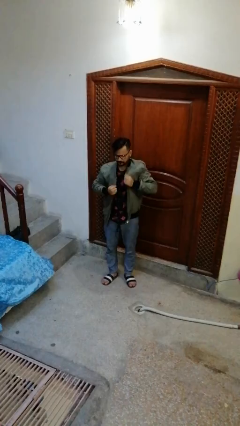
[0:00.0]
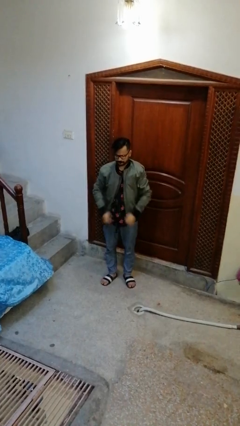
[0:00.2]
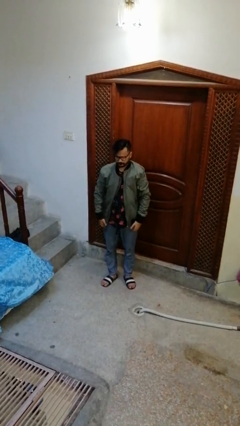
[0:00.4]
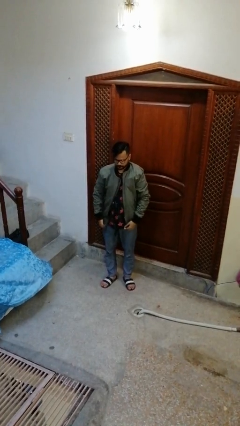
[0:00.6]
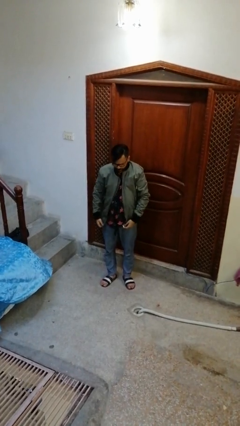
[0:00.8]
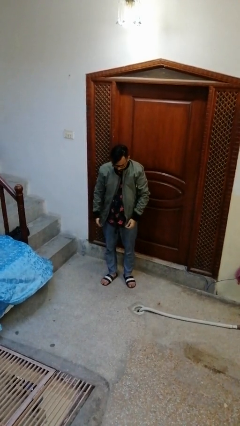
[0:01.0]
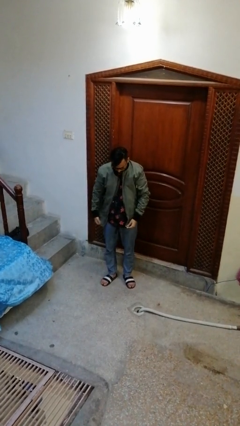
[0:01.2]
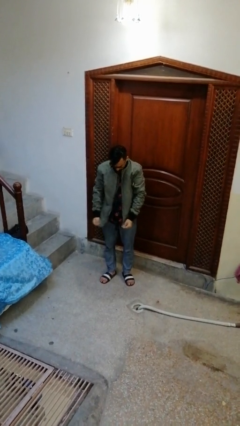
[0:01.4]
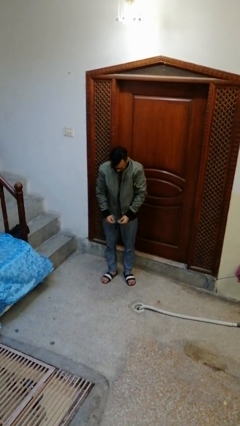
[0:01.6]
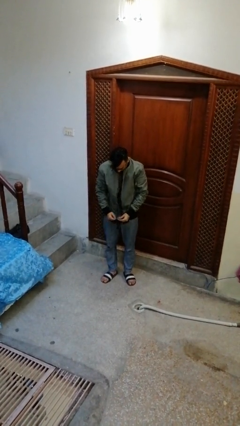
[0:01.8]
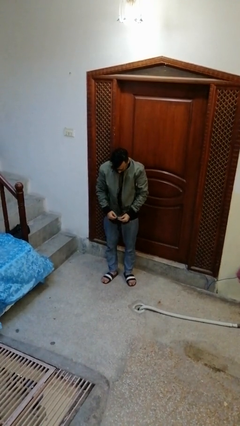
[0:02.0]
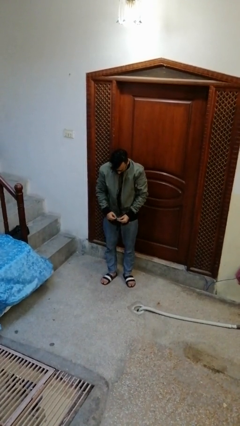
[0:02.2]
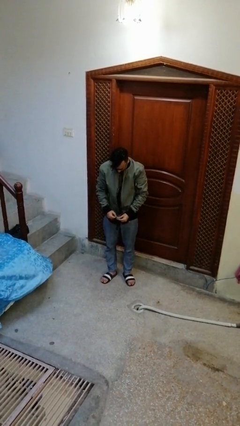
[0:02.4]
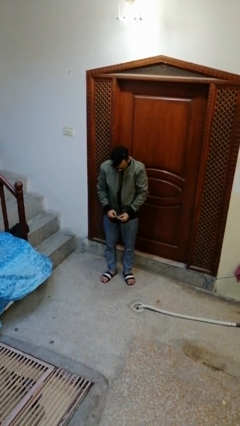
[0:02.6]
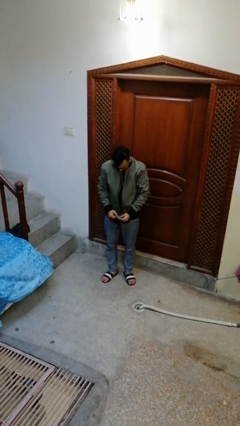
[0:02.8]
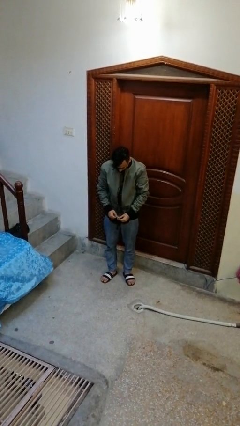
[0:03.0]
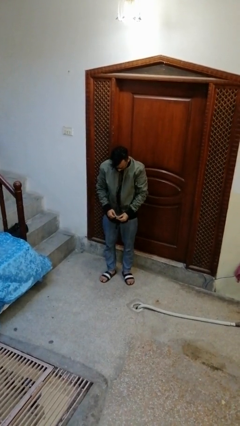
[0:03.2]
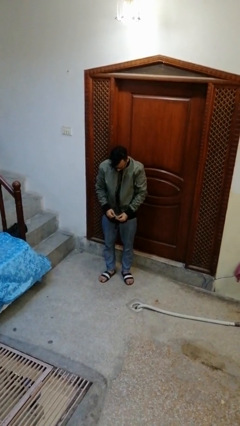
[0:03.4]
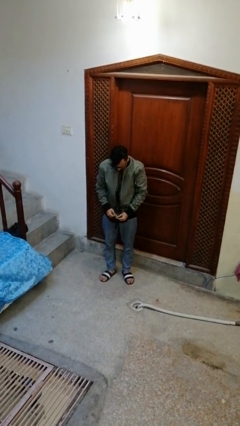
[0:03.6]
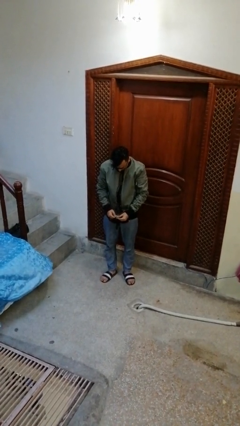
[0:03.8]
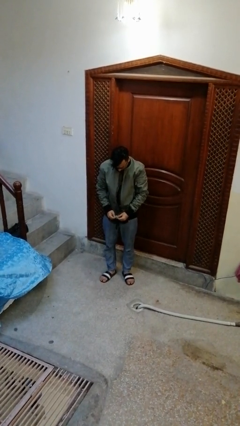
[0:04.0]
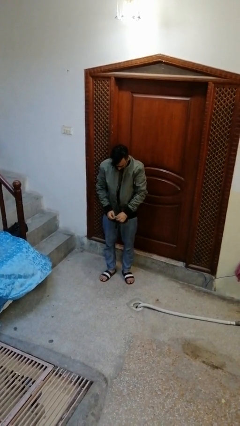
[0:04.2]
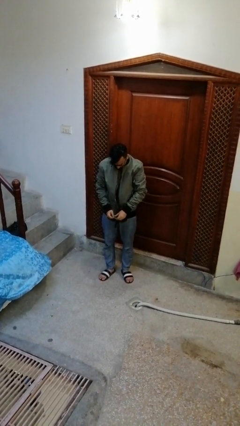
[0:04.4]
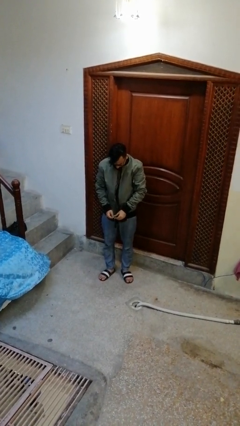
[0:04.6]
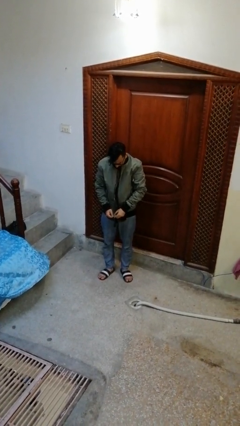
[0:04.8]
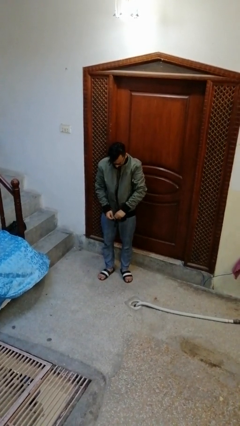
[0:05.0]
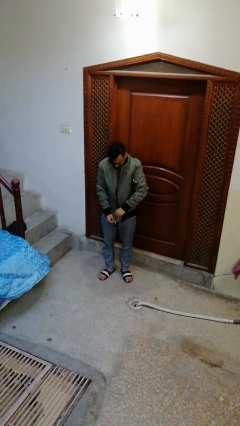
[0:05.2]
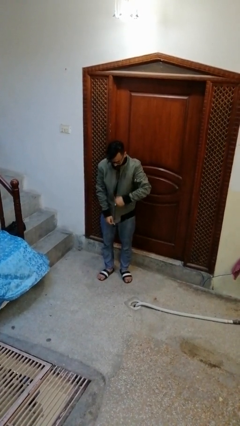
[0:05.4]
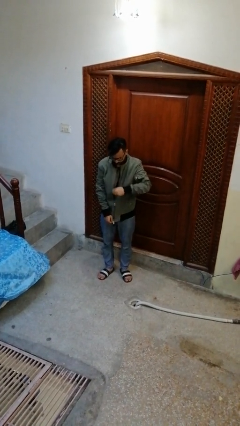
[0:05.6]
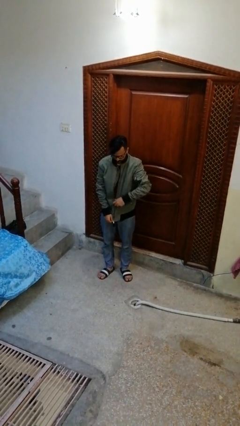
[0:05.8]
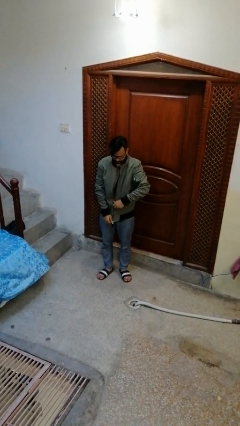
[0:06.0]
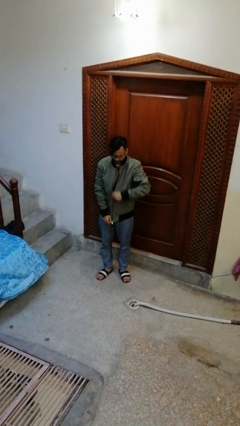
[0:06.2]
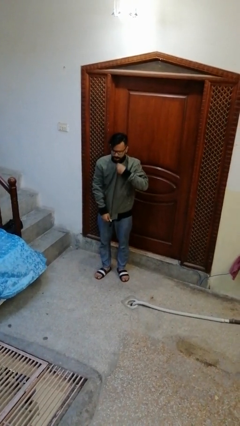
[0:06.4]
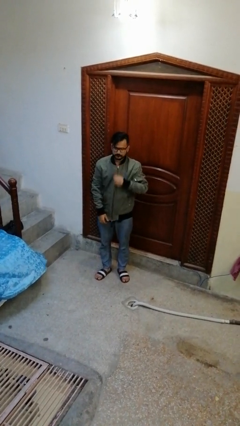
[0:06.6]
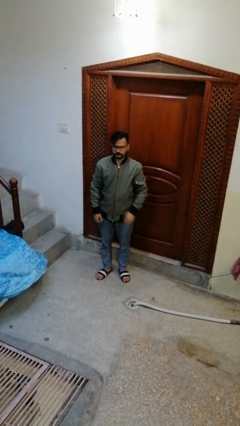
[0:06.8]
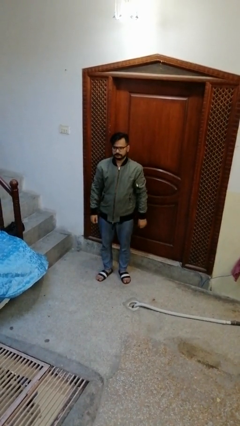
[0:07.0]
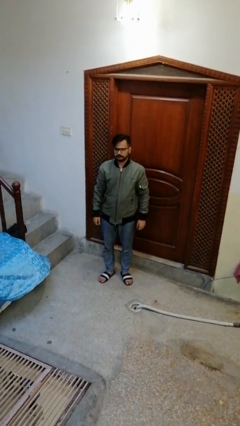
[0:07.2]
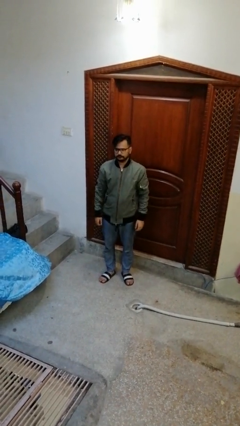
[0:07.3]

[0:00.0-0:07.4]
person zips up jacket

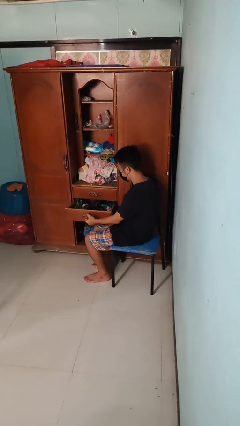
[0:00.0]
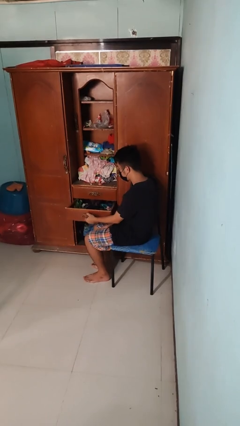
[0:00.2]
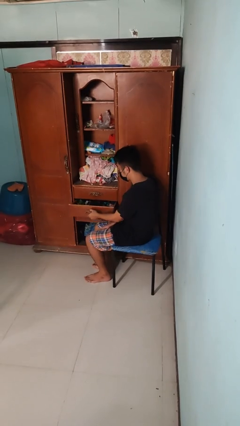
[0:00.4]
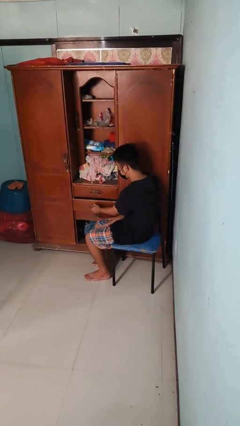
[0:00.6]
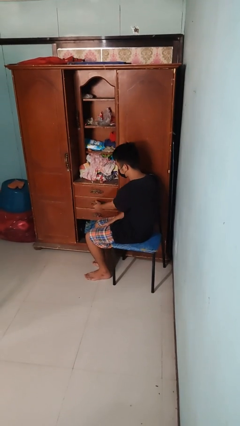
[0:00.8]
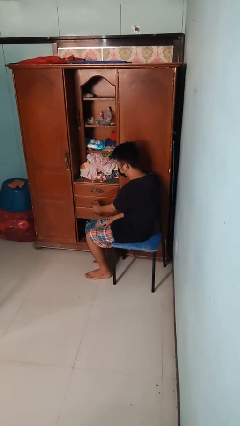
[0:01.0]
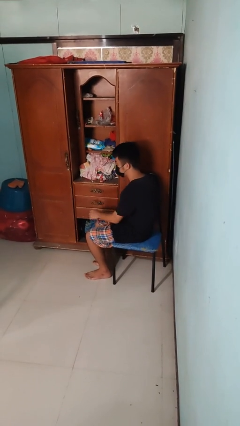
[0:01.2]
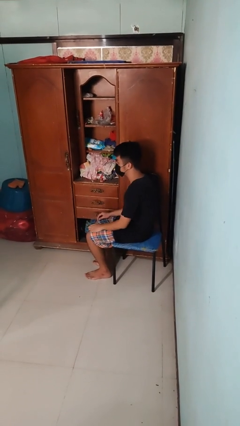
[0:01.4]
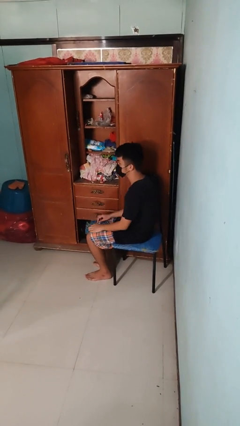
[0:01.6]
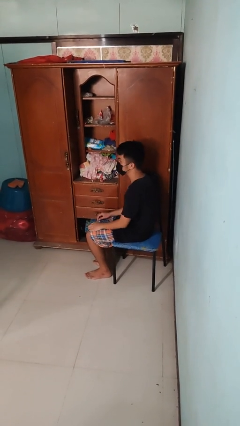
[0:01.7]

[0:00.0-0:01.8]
person closes dresser drawer

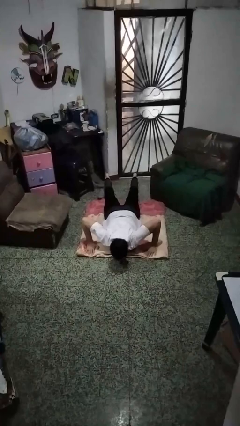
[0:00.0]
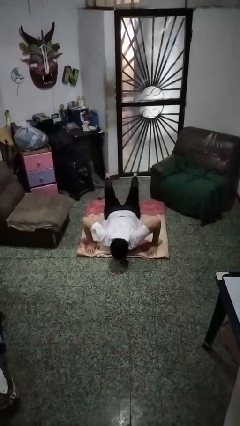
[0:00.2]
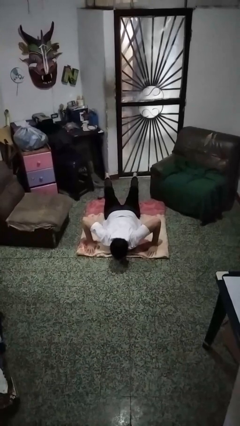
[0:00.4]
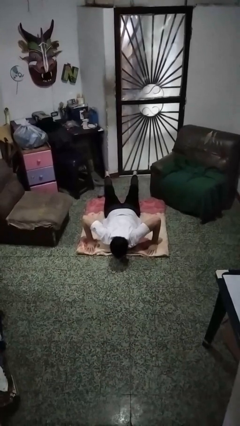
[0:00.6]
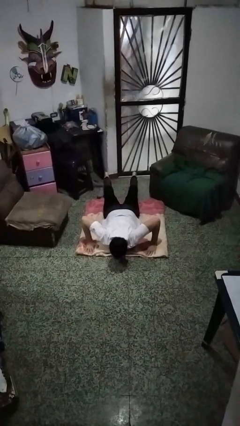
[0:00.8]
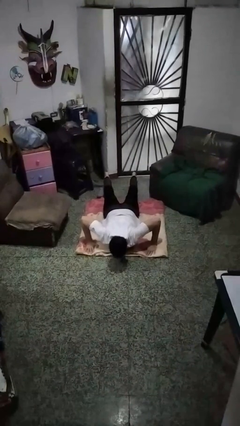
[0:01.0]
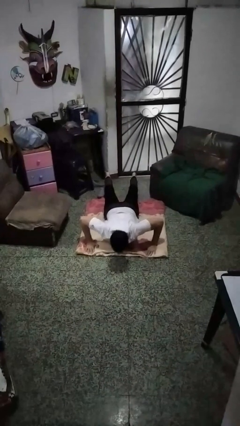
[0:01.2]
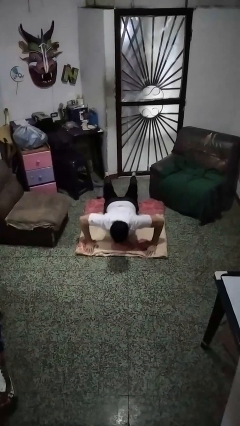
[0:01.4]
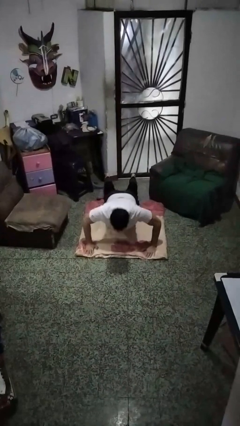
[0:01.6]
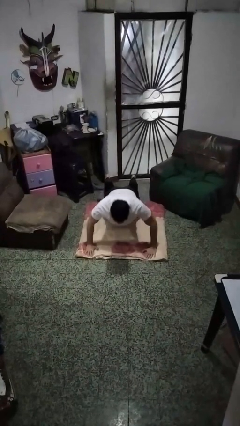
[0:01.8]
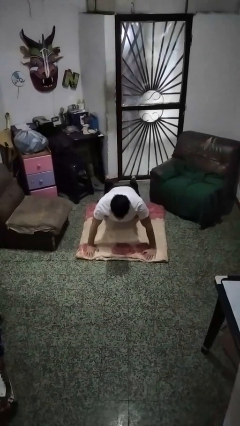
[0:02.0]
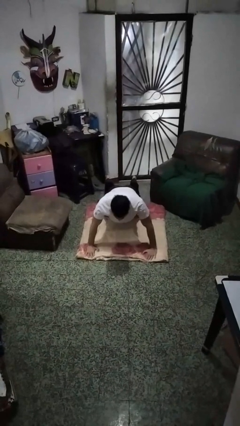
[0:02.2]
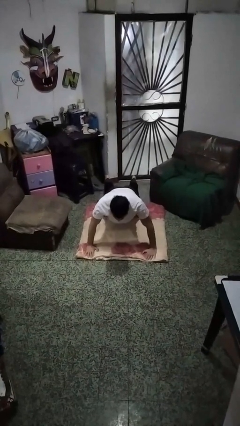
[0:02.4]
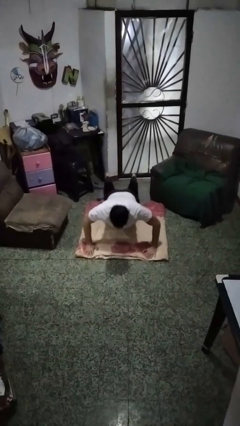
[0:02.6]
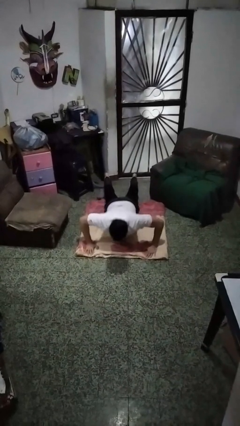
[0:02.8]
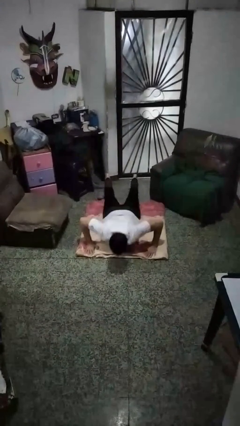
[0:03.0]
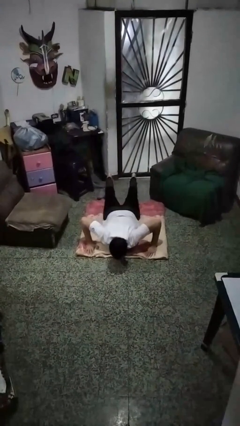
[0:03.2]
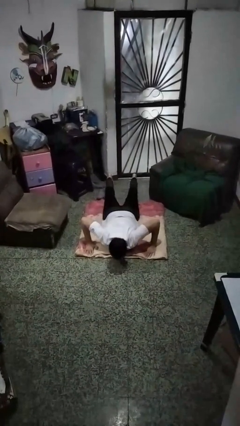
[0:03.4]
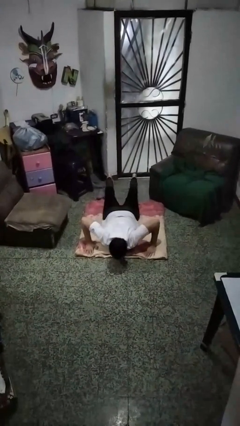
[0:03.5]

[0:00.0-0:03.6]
person exercises with pushup

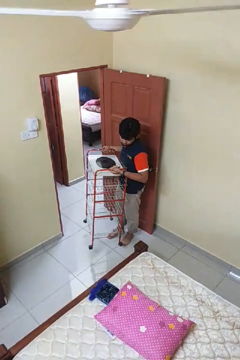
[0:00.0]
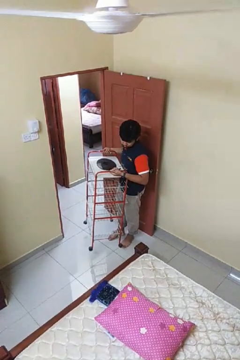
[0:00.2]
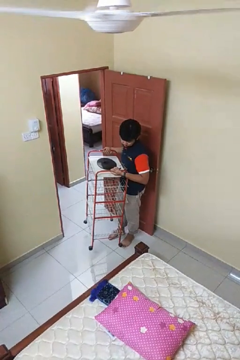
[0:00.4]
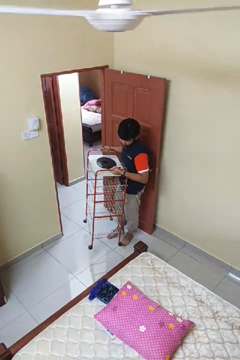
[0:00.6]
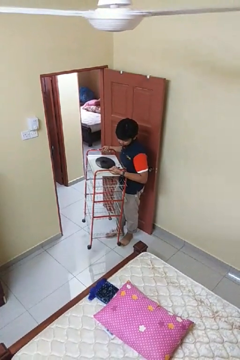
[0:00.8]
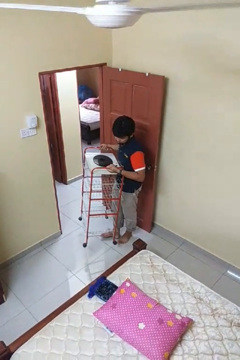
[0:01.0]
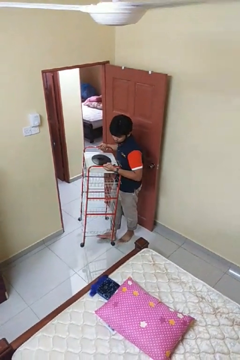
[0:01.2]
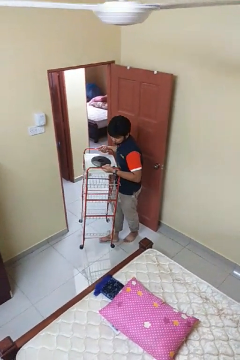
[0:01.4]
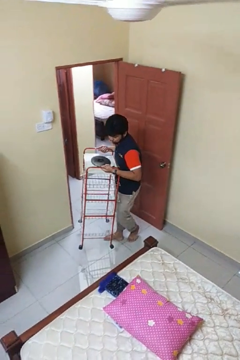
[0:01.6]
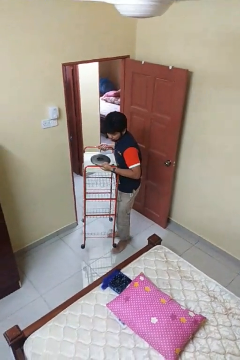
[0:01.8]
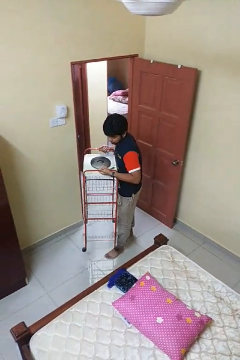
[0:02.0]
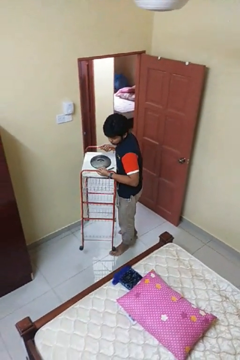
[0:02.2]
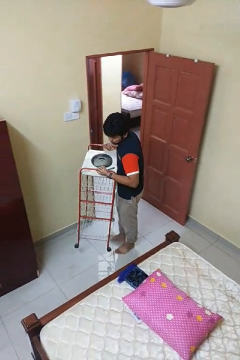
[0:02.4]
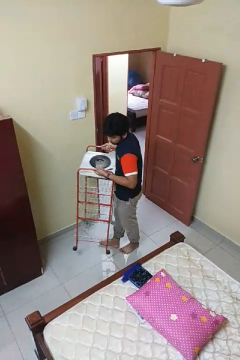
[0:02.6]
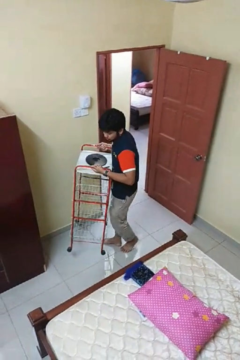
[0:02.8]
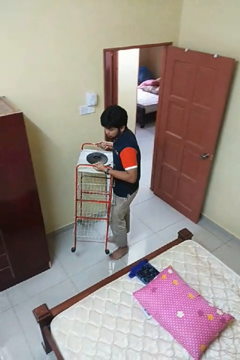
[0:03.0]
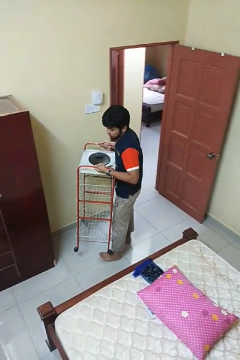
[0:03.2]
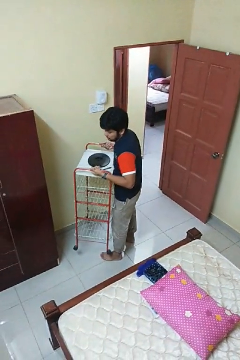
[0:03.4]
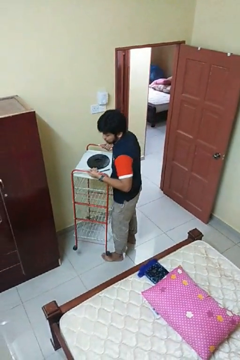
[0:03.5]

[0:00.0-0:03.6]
person carries furniture

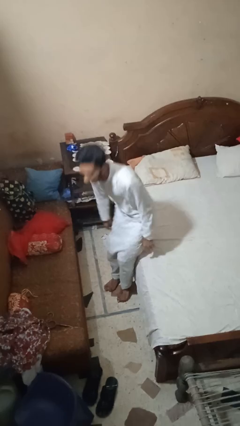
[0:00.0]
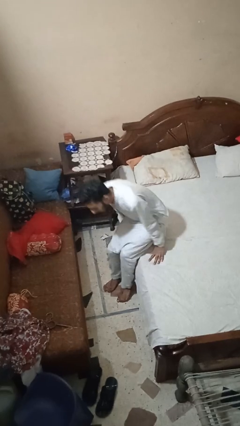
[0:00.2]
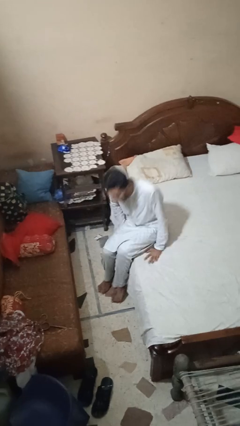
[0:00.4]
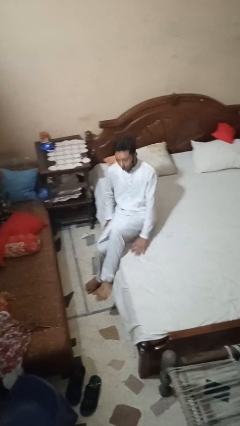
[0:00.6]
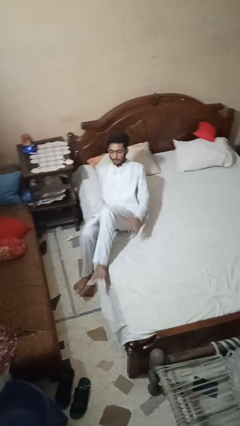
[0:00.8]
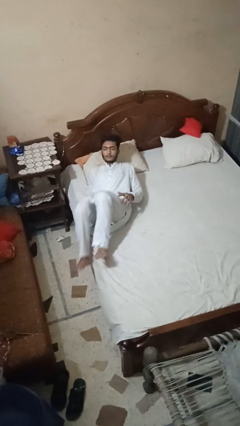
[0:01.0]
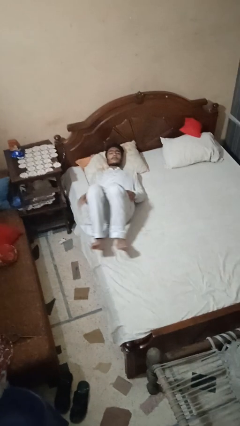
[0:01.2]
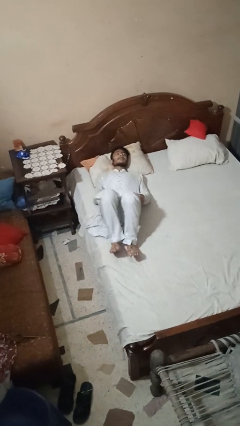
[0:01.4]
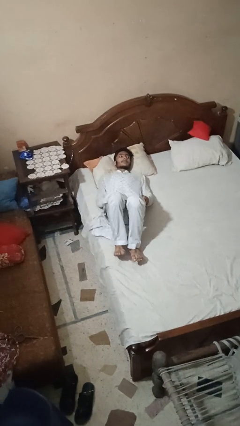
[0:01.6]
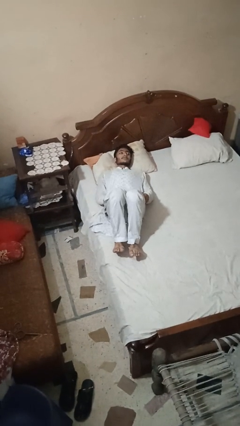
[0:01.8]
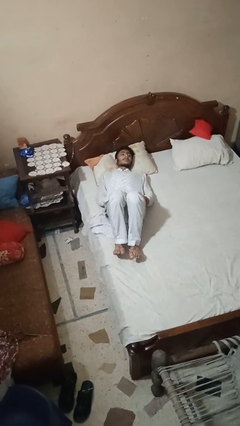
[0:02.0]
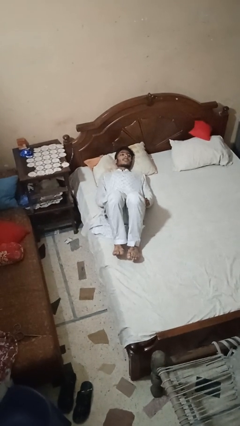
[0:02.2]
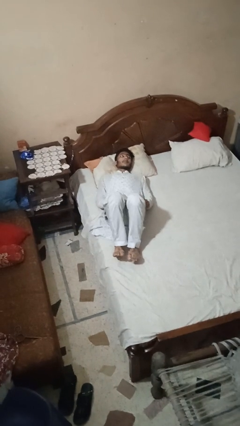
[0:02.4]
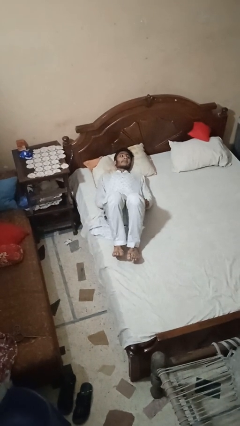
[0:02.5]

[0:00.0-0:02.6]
person lies down on bed
